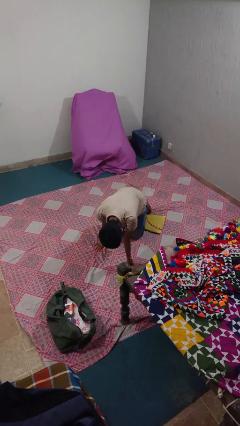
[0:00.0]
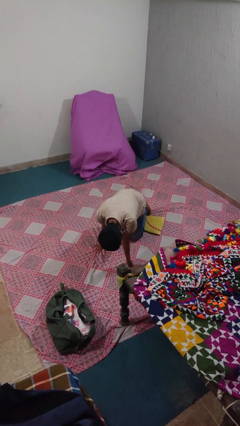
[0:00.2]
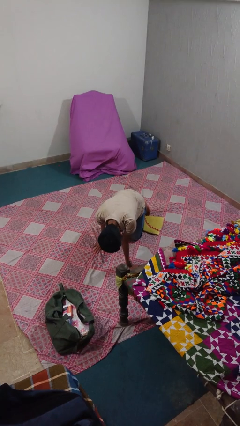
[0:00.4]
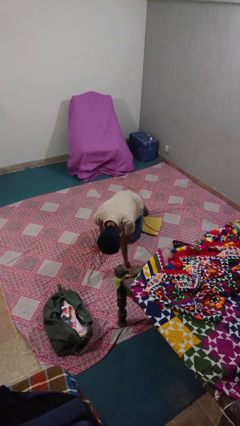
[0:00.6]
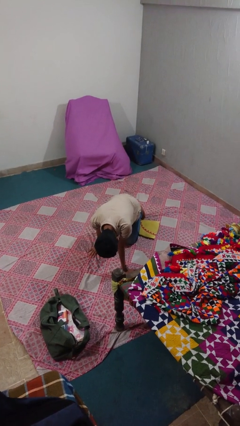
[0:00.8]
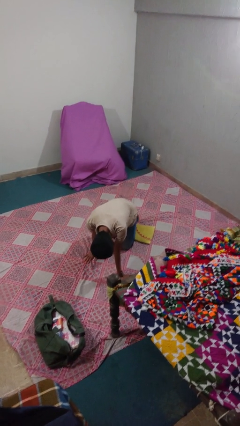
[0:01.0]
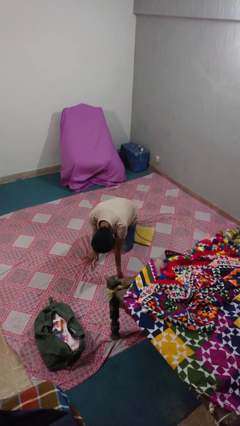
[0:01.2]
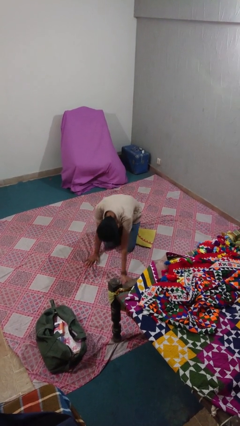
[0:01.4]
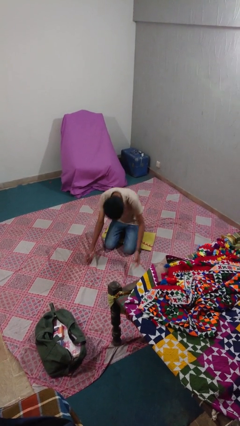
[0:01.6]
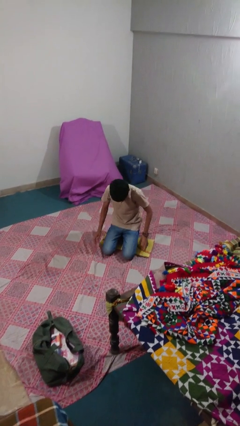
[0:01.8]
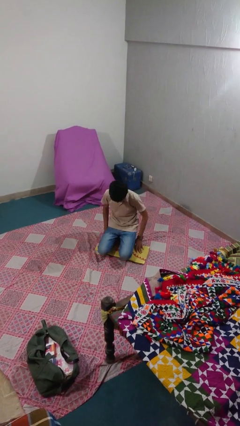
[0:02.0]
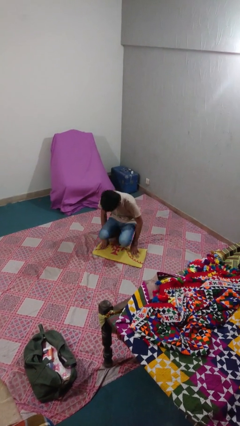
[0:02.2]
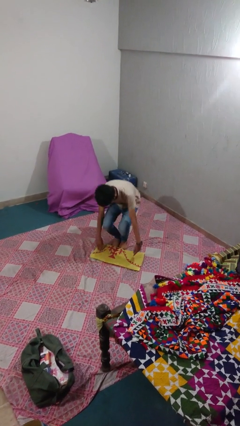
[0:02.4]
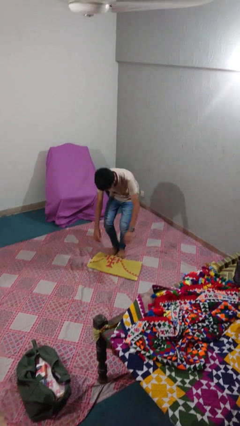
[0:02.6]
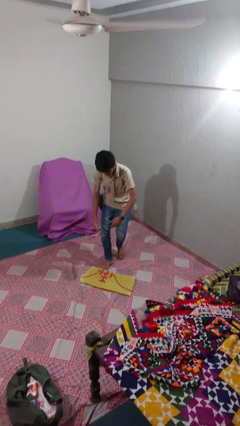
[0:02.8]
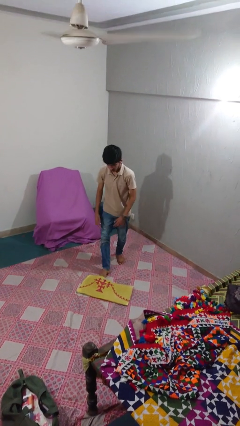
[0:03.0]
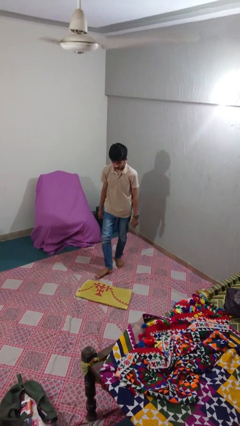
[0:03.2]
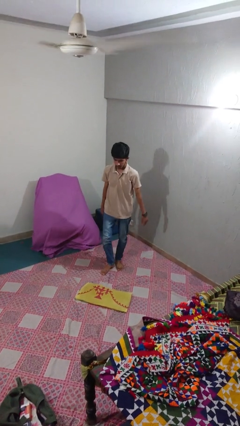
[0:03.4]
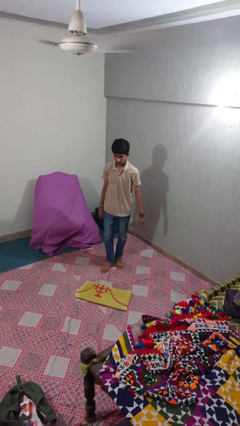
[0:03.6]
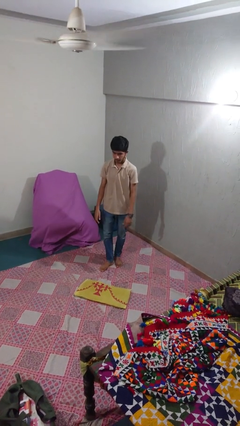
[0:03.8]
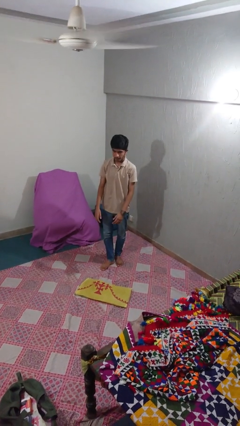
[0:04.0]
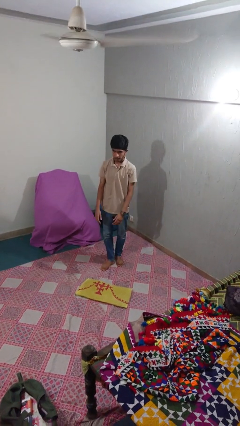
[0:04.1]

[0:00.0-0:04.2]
person stands up from floor

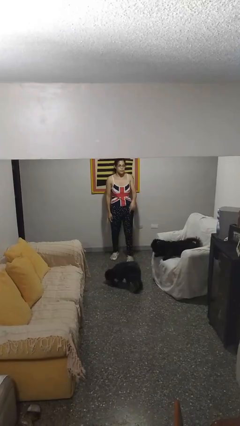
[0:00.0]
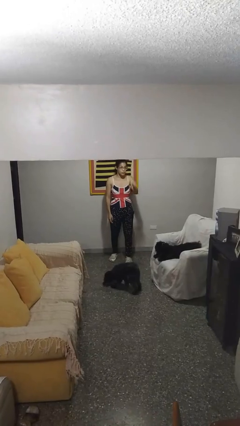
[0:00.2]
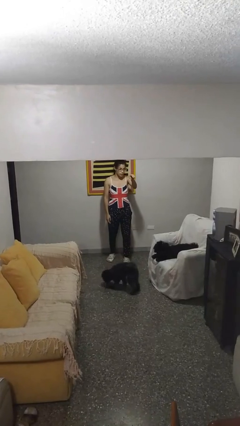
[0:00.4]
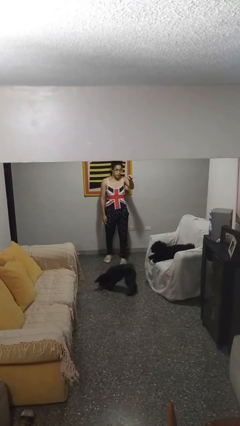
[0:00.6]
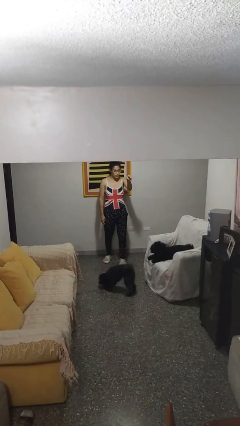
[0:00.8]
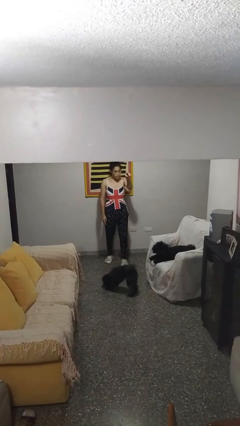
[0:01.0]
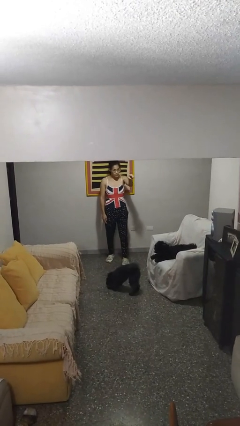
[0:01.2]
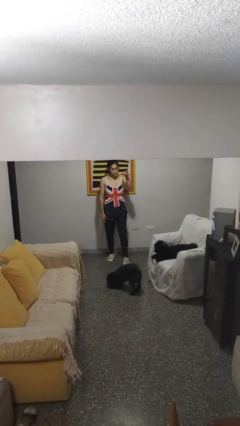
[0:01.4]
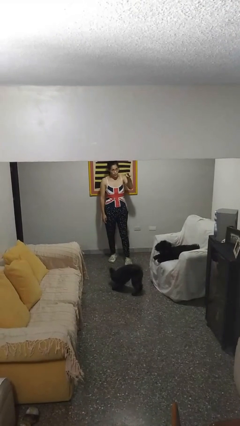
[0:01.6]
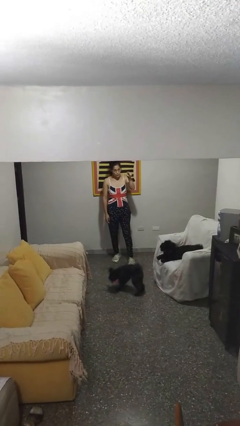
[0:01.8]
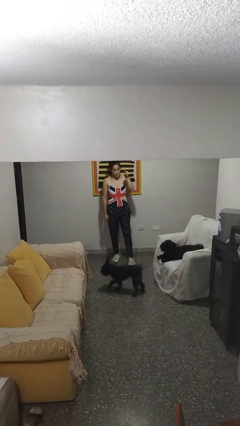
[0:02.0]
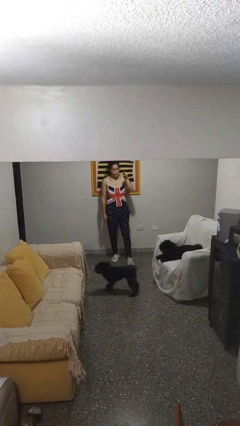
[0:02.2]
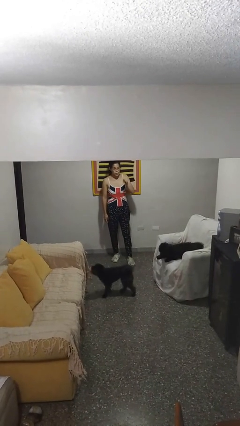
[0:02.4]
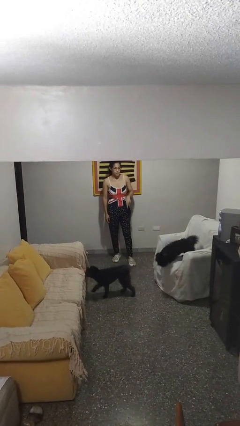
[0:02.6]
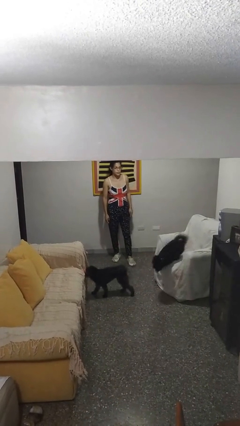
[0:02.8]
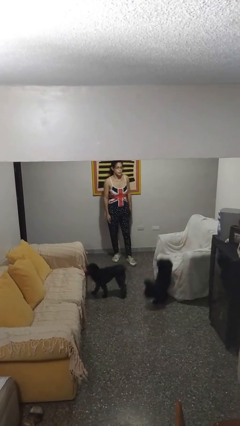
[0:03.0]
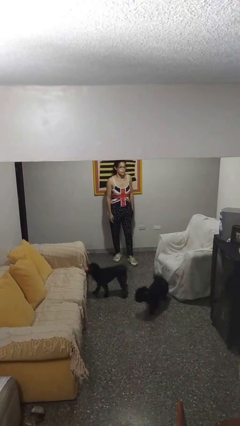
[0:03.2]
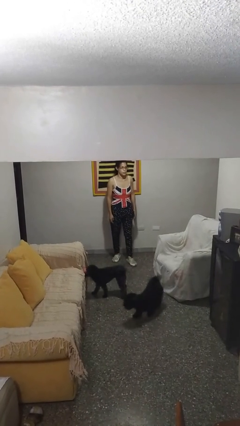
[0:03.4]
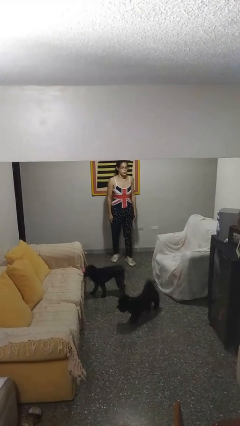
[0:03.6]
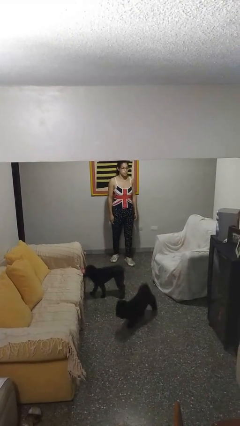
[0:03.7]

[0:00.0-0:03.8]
person points at person

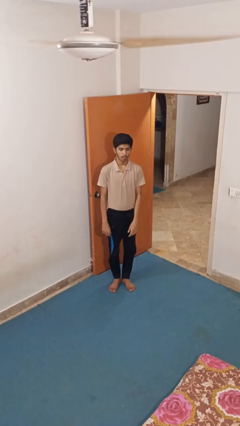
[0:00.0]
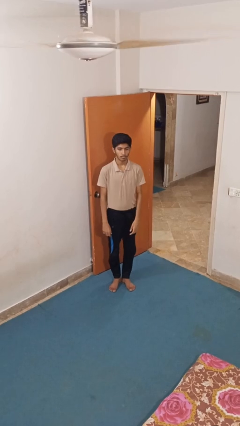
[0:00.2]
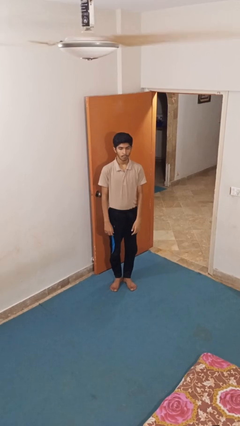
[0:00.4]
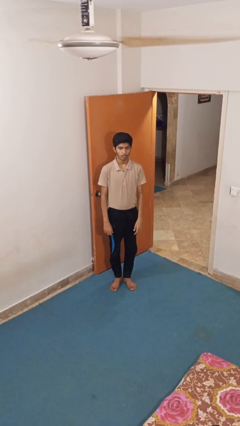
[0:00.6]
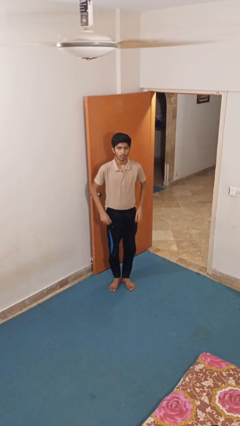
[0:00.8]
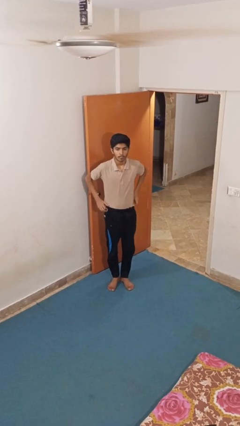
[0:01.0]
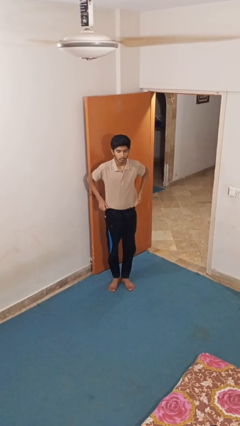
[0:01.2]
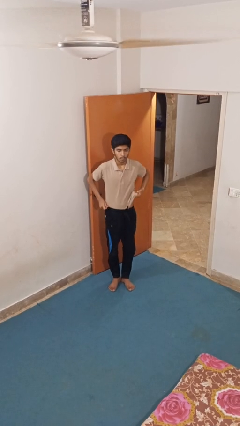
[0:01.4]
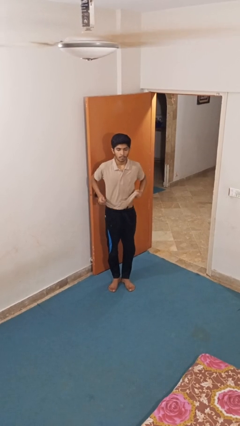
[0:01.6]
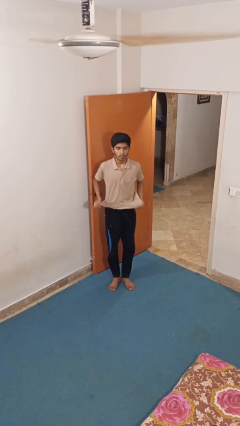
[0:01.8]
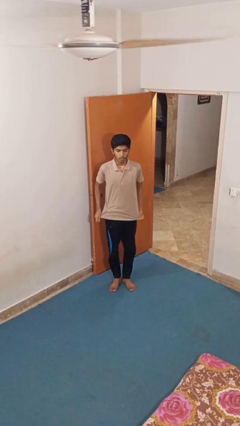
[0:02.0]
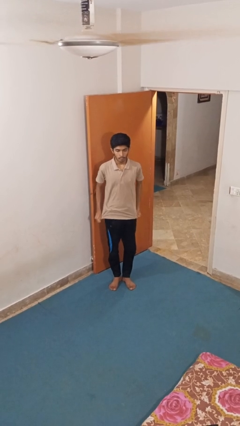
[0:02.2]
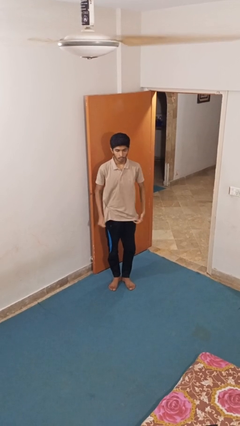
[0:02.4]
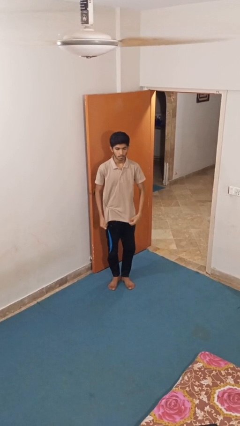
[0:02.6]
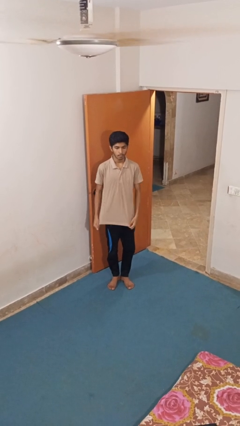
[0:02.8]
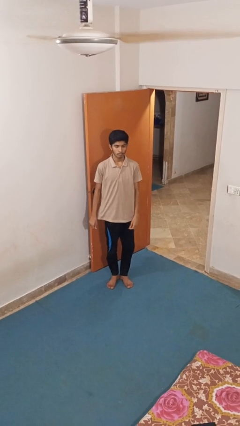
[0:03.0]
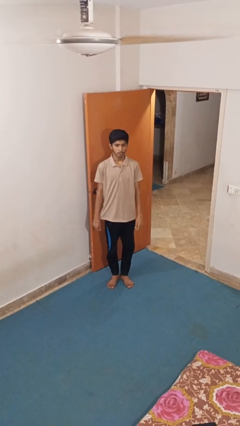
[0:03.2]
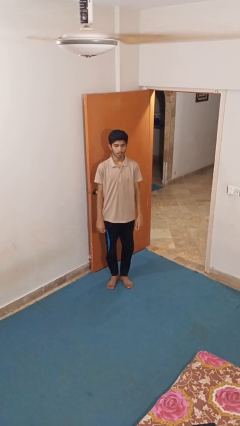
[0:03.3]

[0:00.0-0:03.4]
person untucks shirt

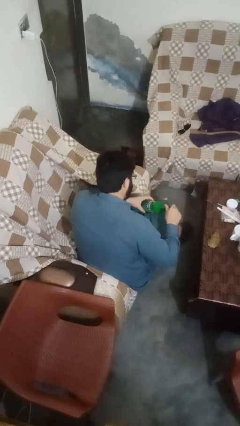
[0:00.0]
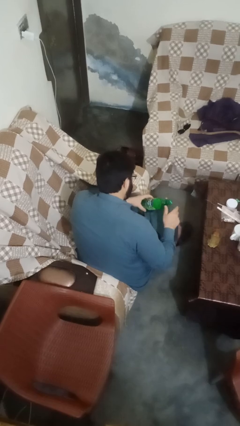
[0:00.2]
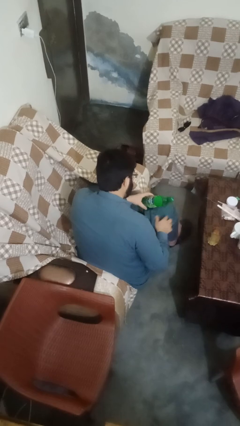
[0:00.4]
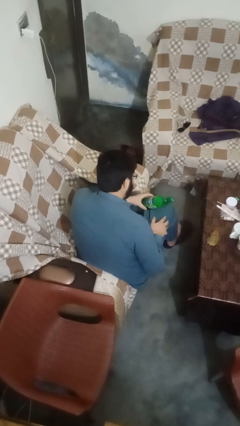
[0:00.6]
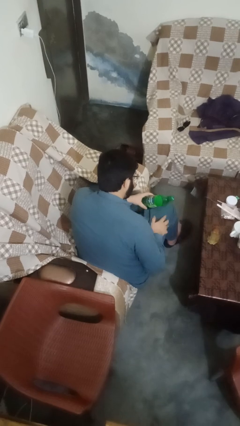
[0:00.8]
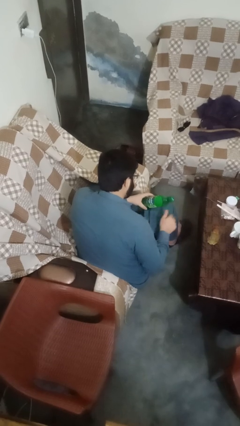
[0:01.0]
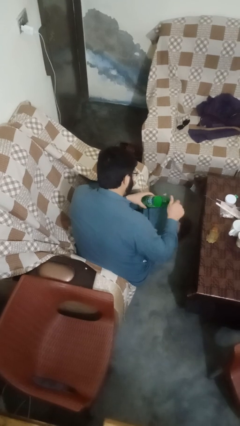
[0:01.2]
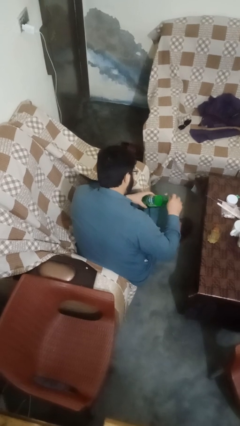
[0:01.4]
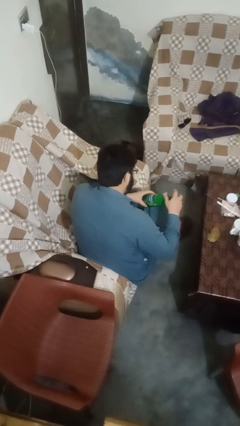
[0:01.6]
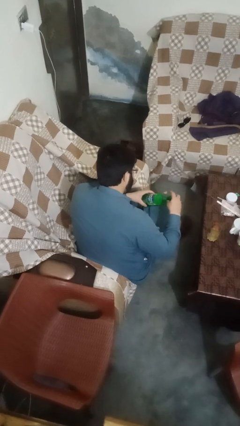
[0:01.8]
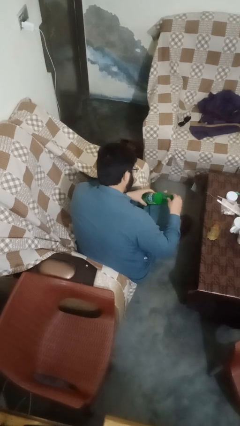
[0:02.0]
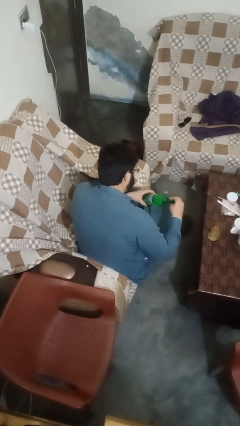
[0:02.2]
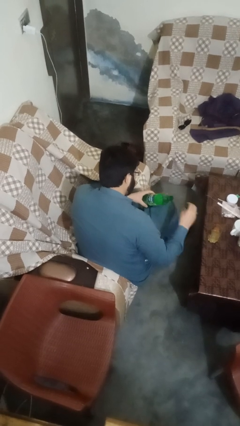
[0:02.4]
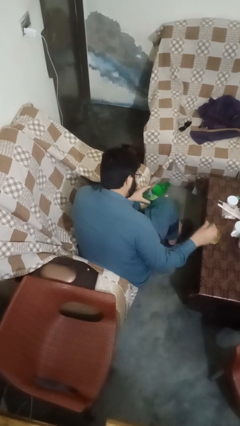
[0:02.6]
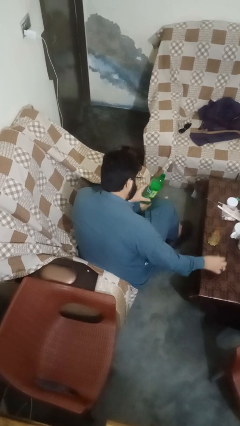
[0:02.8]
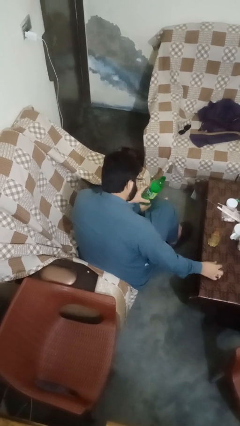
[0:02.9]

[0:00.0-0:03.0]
person unscrews lid from bottle

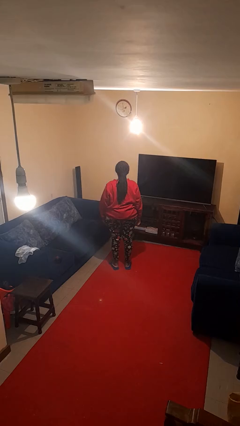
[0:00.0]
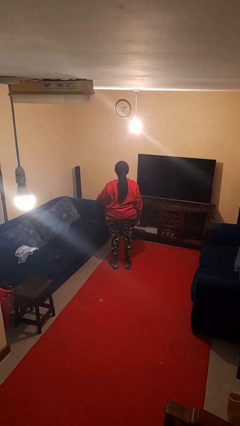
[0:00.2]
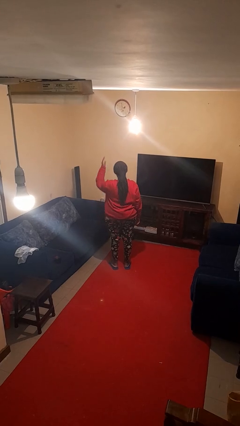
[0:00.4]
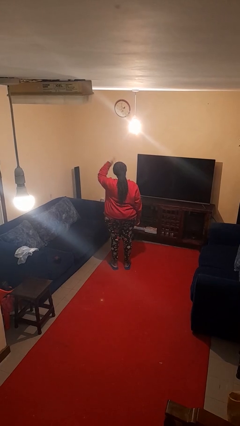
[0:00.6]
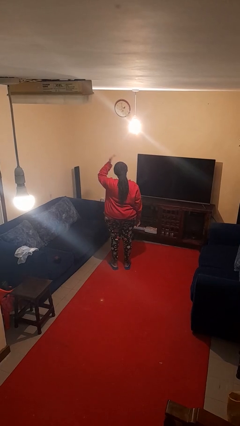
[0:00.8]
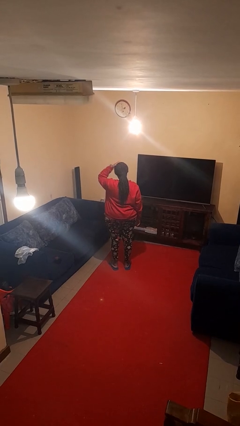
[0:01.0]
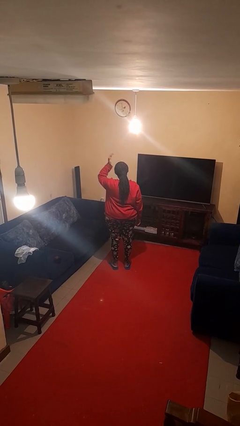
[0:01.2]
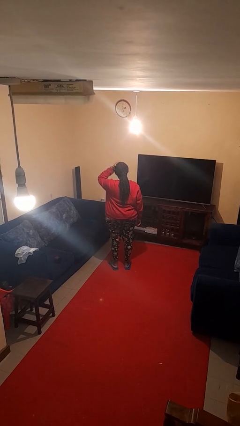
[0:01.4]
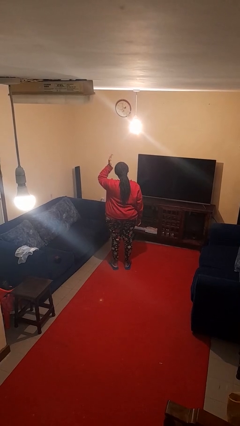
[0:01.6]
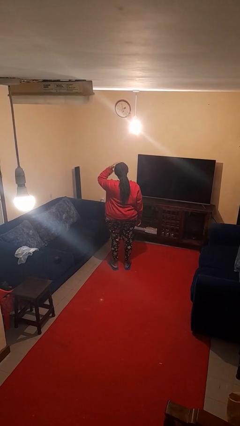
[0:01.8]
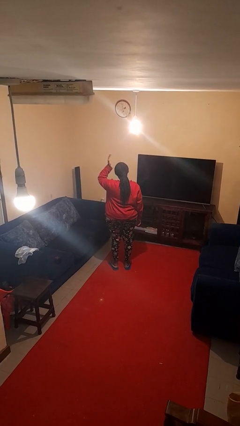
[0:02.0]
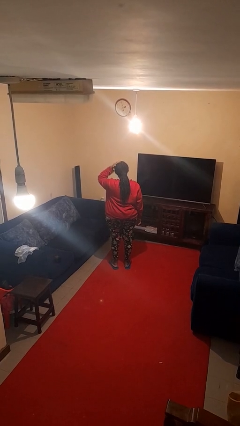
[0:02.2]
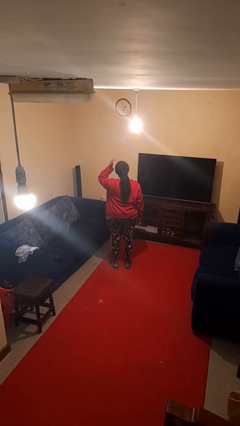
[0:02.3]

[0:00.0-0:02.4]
person pats head

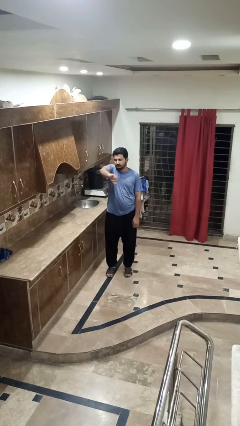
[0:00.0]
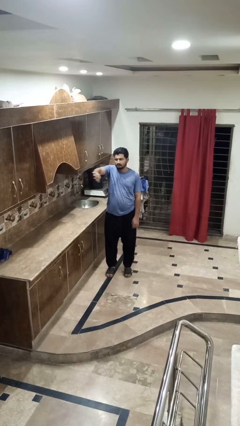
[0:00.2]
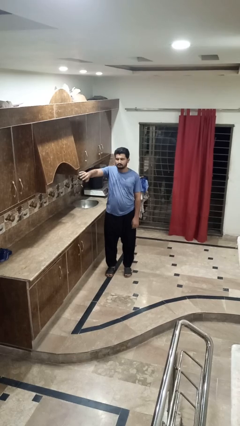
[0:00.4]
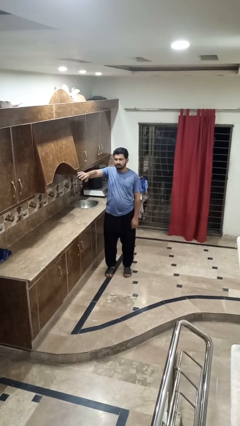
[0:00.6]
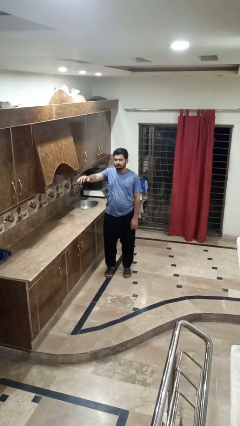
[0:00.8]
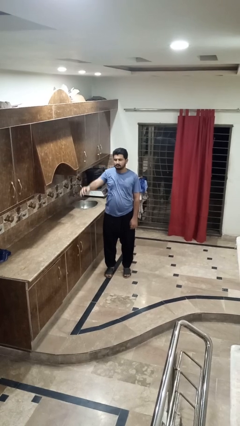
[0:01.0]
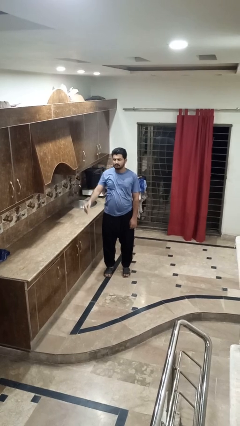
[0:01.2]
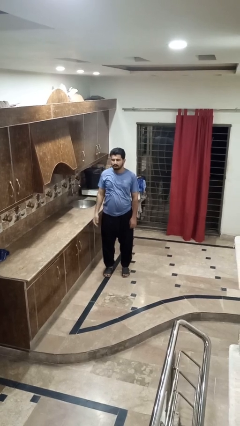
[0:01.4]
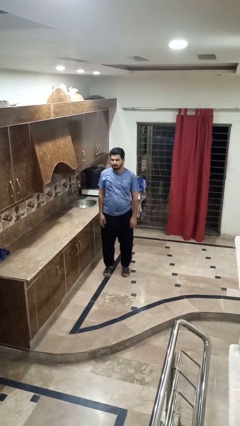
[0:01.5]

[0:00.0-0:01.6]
person gestures swipe right
